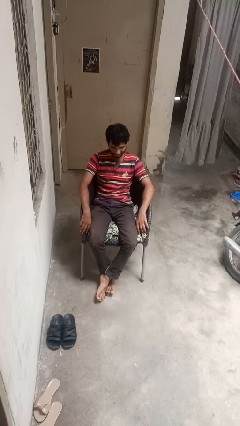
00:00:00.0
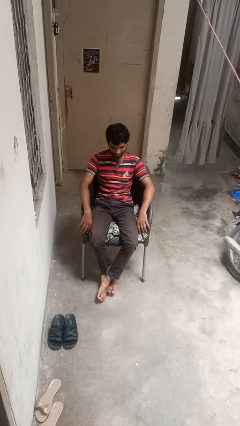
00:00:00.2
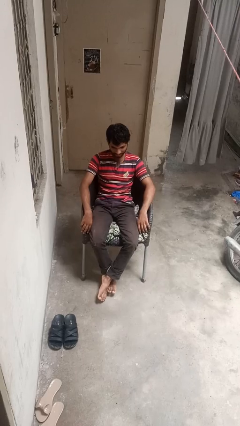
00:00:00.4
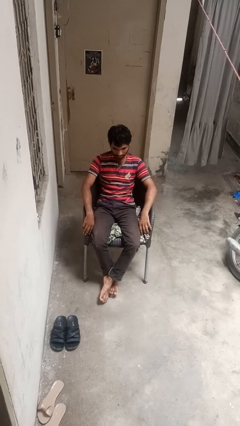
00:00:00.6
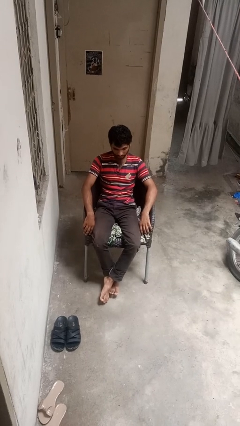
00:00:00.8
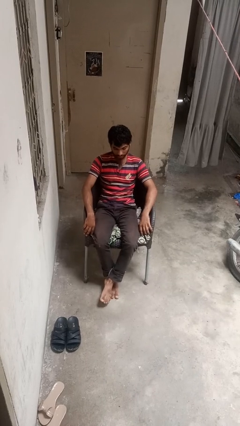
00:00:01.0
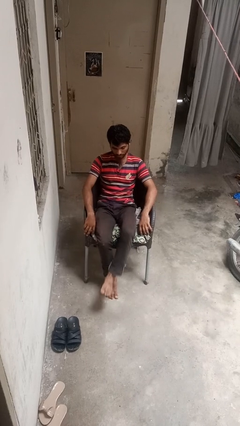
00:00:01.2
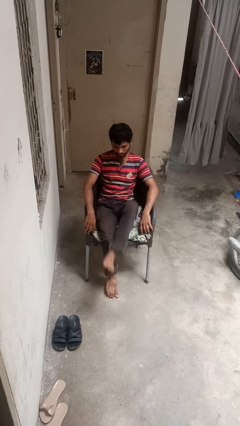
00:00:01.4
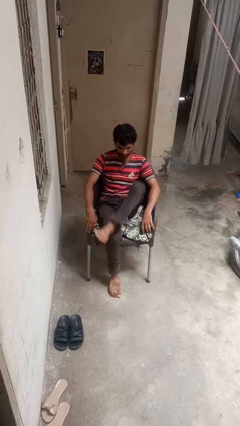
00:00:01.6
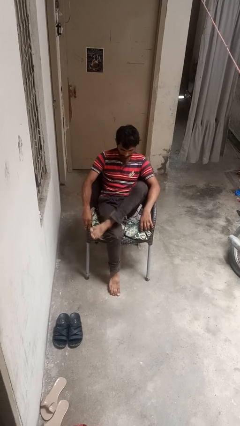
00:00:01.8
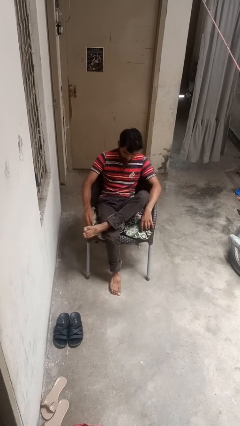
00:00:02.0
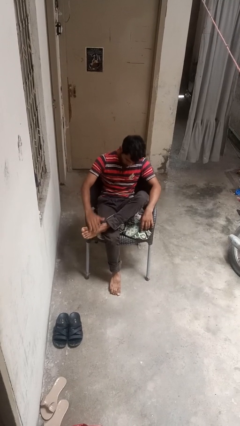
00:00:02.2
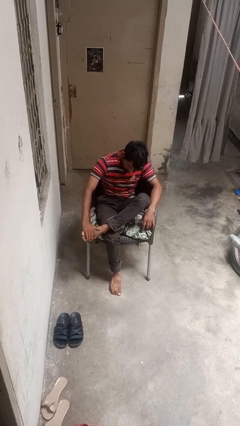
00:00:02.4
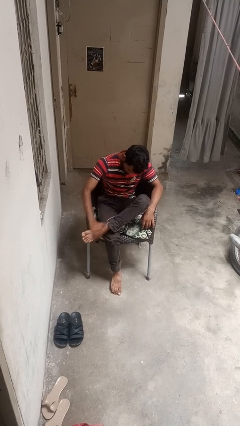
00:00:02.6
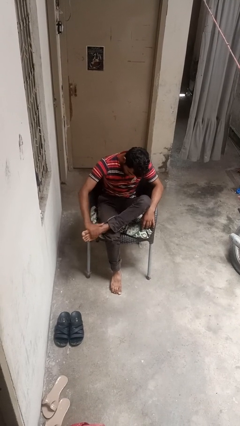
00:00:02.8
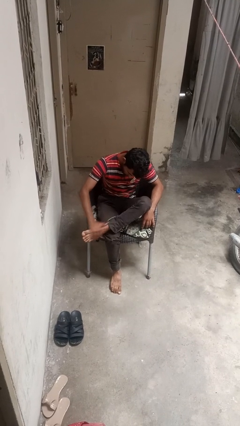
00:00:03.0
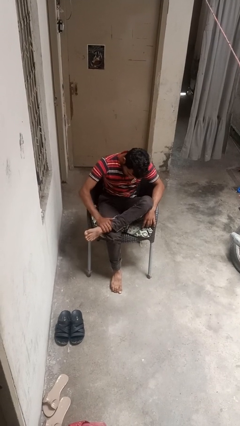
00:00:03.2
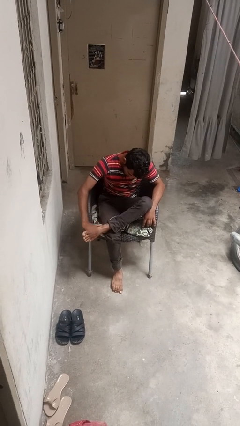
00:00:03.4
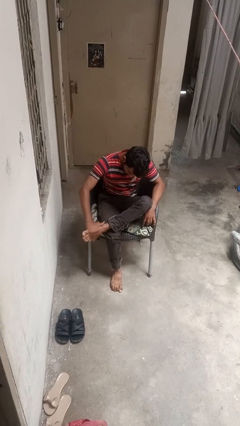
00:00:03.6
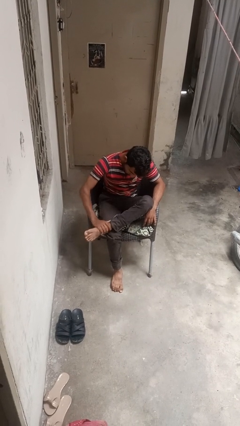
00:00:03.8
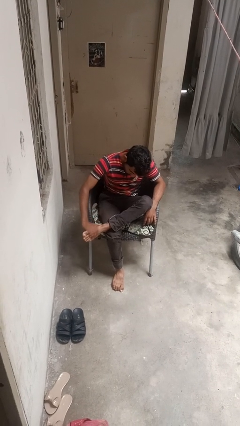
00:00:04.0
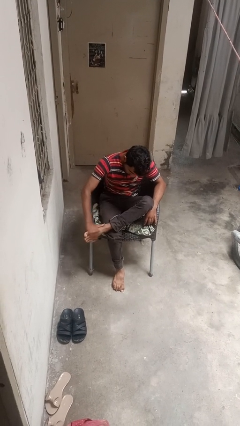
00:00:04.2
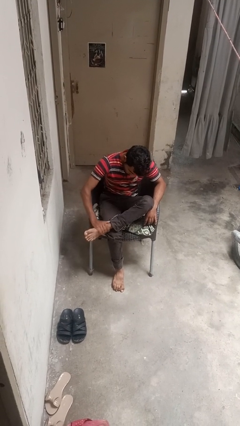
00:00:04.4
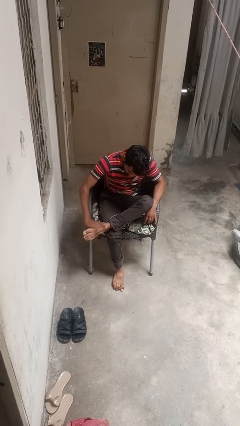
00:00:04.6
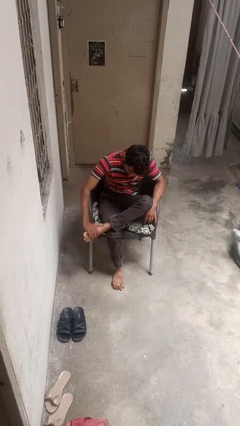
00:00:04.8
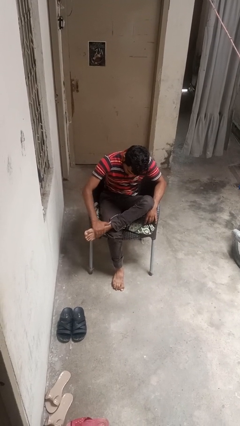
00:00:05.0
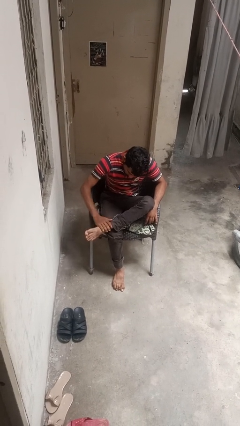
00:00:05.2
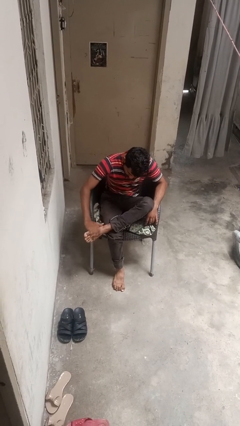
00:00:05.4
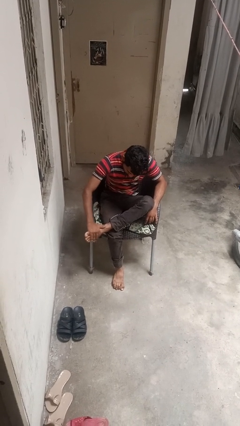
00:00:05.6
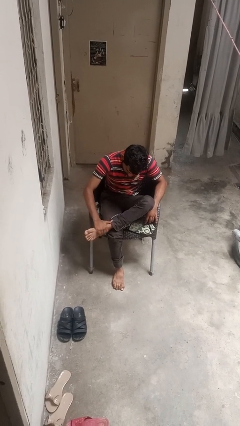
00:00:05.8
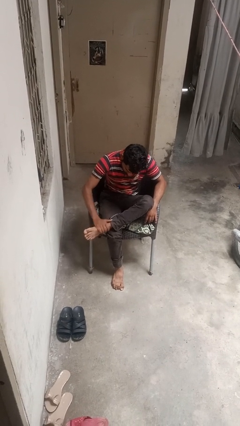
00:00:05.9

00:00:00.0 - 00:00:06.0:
person rubs foot

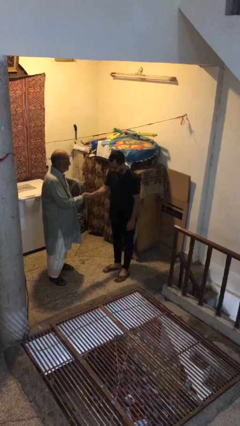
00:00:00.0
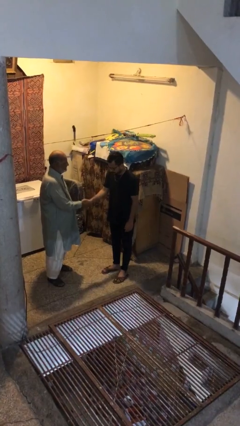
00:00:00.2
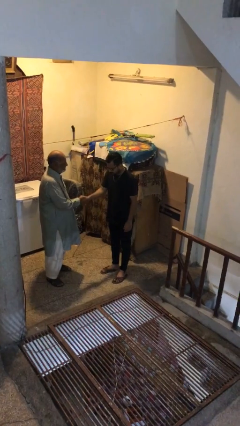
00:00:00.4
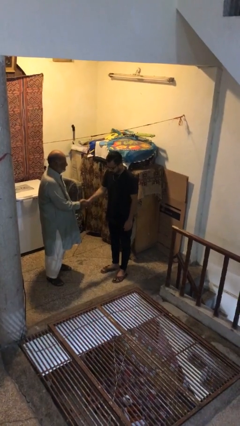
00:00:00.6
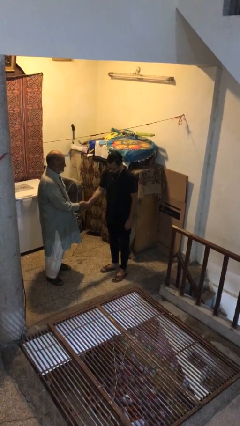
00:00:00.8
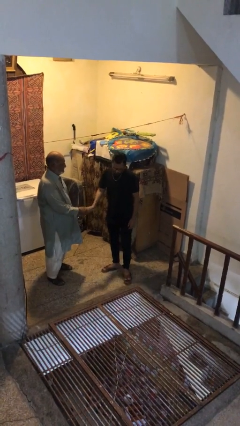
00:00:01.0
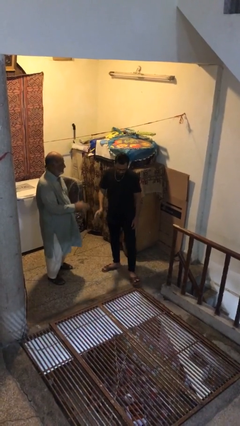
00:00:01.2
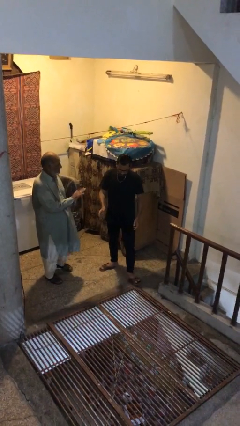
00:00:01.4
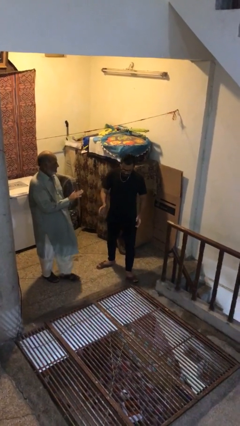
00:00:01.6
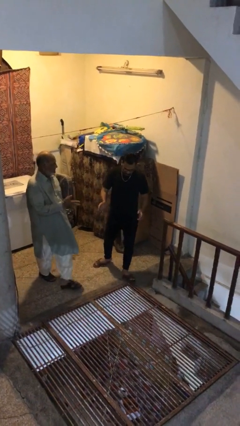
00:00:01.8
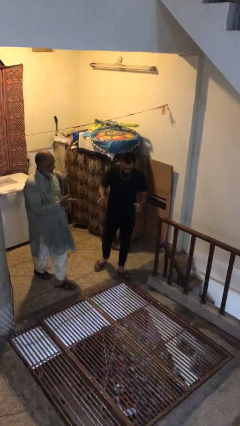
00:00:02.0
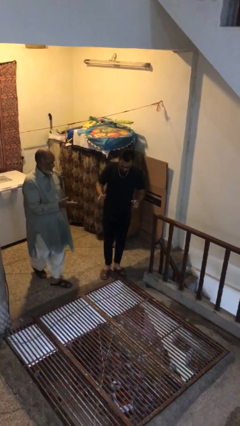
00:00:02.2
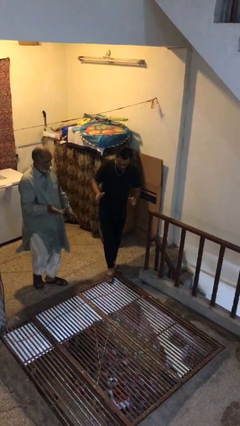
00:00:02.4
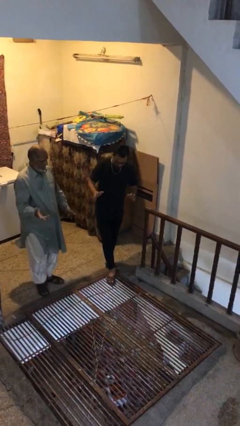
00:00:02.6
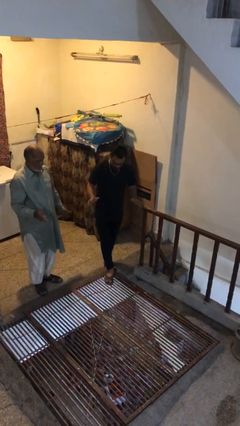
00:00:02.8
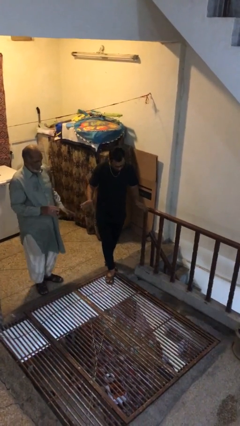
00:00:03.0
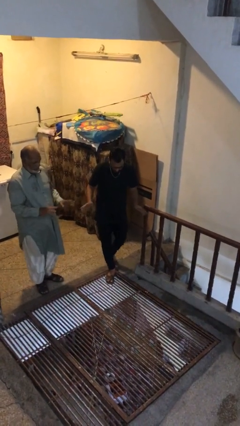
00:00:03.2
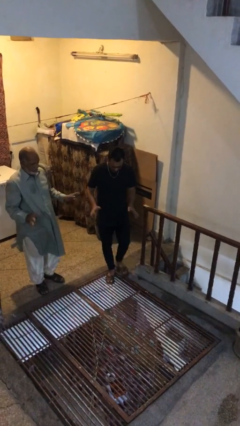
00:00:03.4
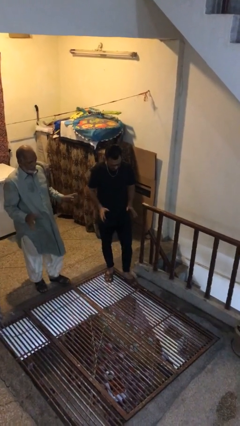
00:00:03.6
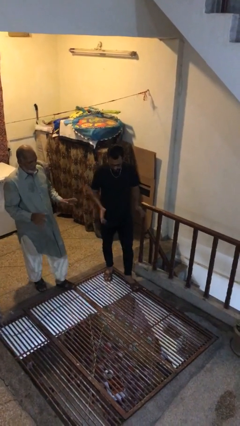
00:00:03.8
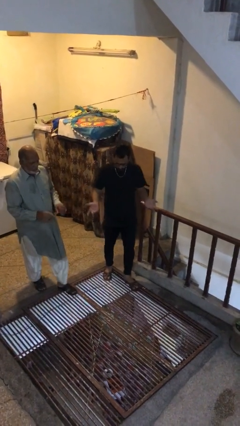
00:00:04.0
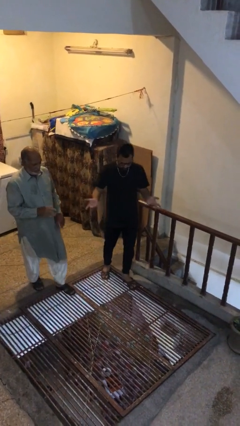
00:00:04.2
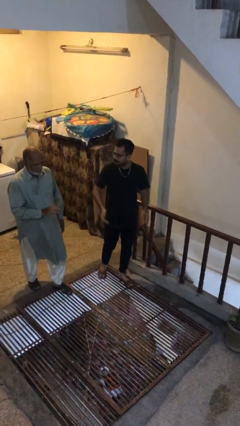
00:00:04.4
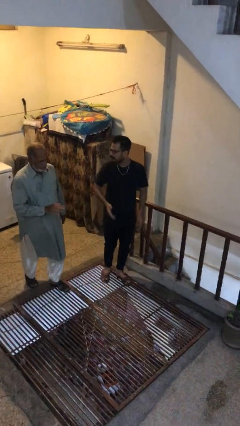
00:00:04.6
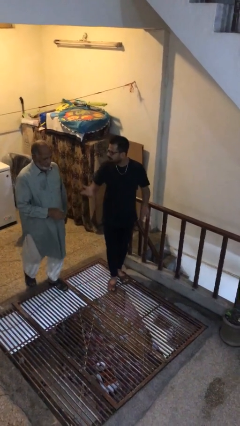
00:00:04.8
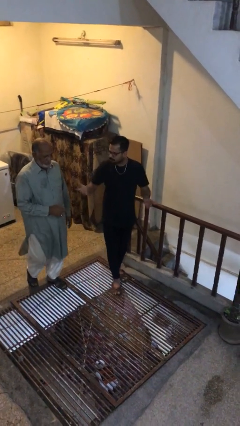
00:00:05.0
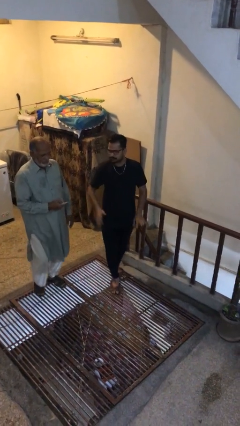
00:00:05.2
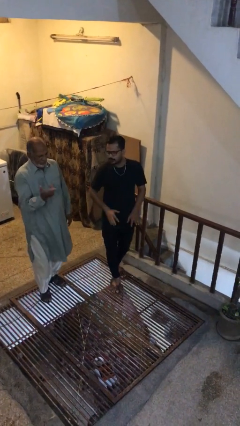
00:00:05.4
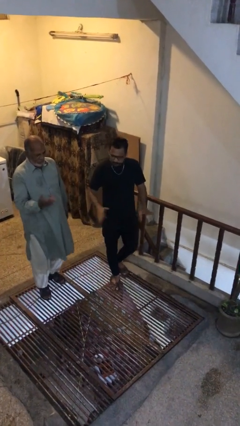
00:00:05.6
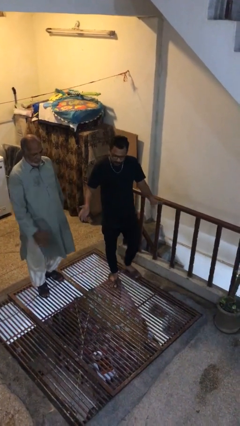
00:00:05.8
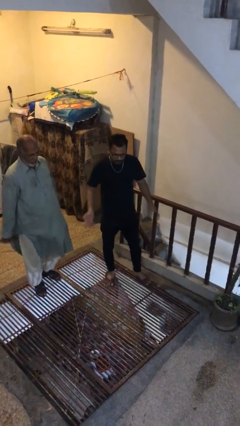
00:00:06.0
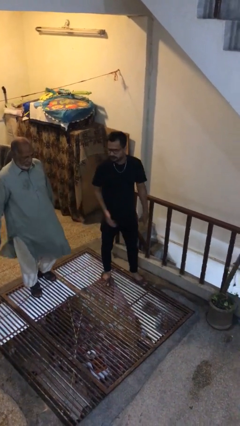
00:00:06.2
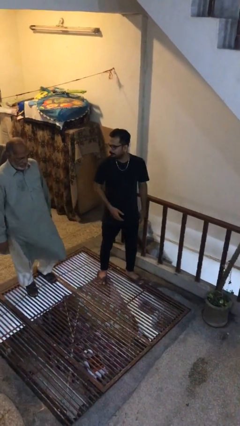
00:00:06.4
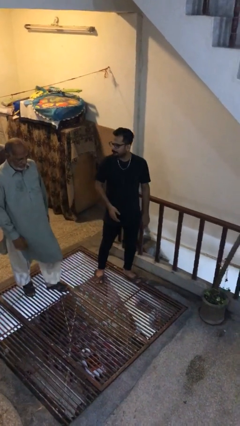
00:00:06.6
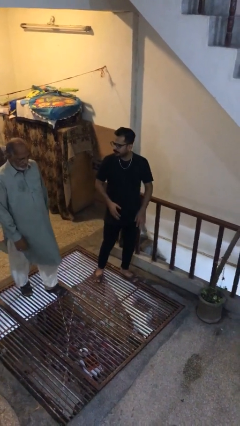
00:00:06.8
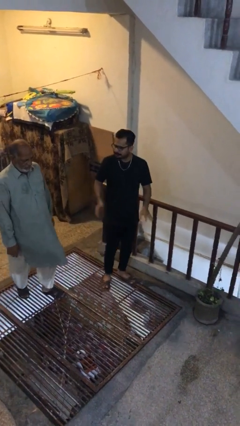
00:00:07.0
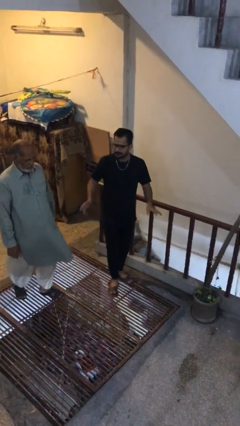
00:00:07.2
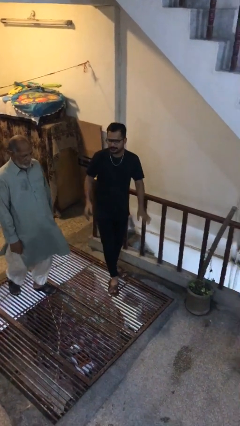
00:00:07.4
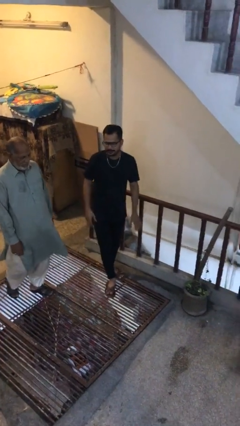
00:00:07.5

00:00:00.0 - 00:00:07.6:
person talks to person

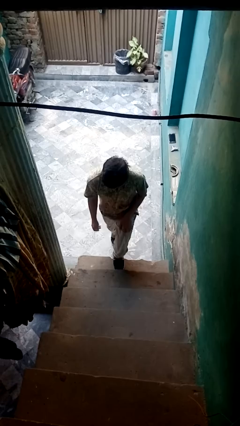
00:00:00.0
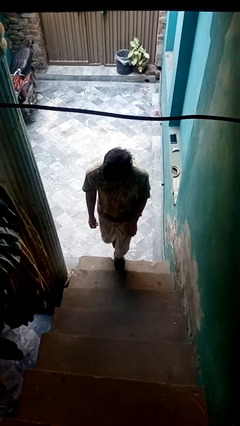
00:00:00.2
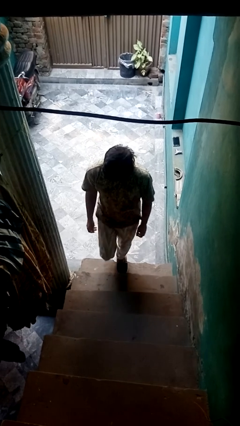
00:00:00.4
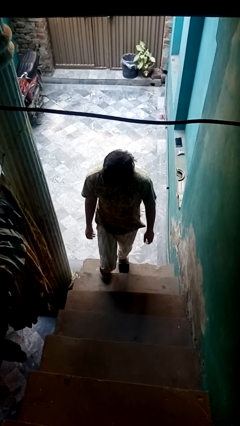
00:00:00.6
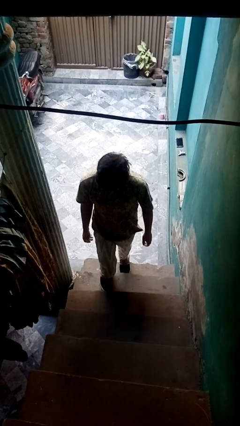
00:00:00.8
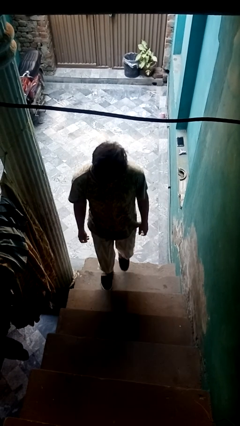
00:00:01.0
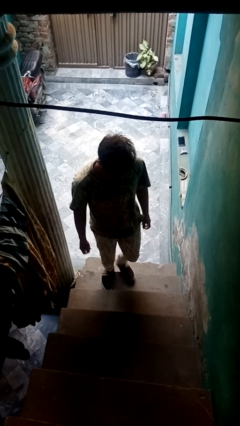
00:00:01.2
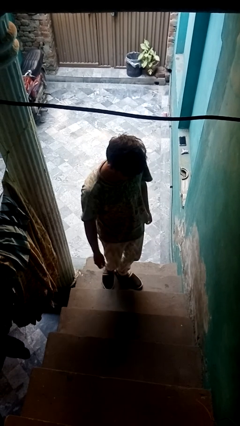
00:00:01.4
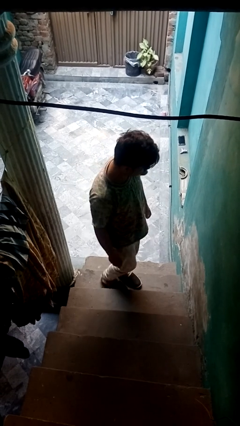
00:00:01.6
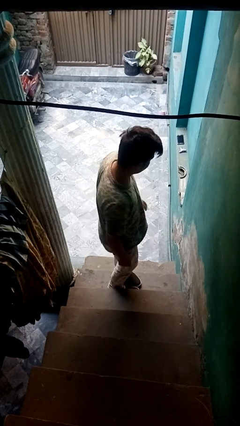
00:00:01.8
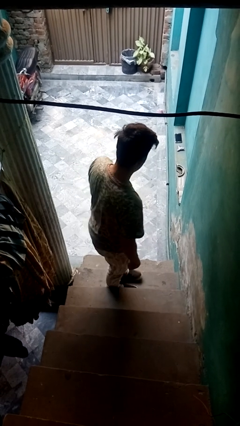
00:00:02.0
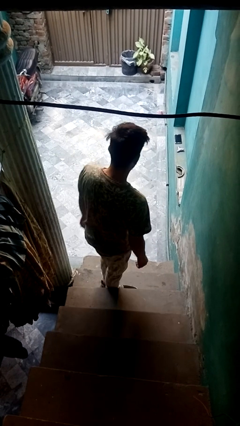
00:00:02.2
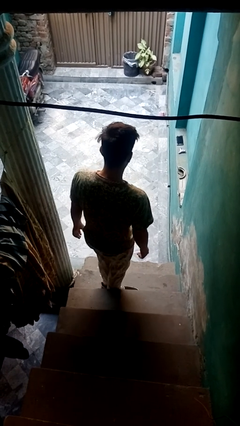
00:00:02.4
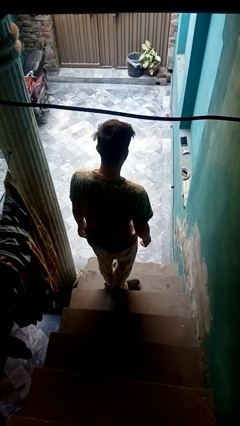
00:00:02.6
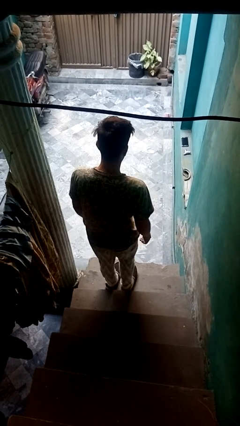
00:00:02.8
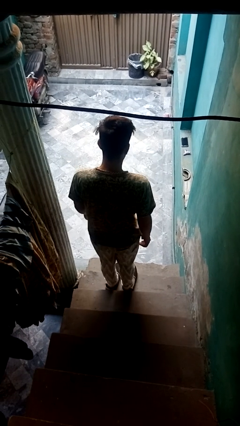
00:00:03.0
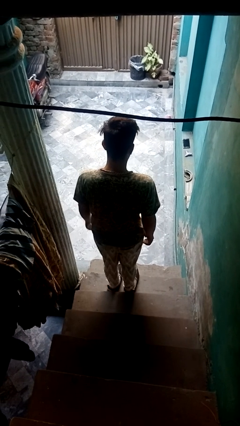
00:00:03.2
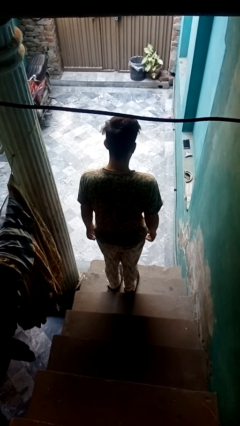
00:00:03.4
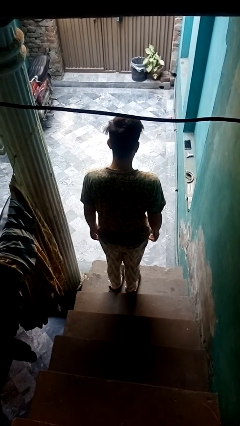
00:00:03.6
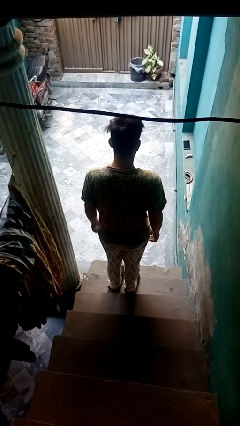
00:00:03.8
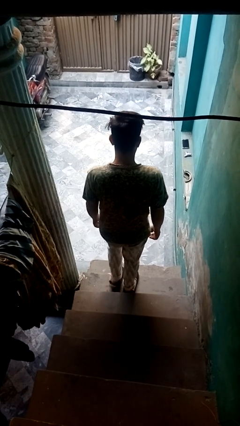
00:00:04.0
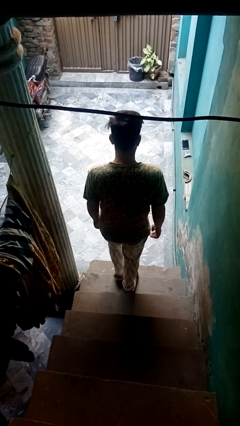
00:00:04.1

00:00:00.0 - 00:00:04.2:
person climbs up stairs

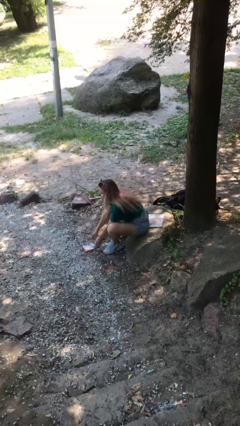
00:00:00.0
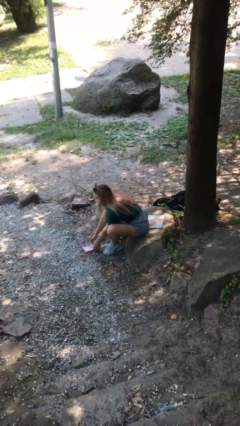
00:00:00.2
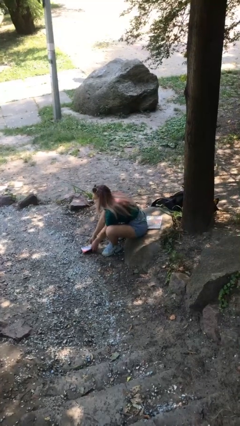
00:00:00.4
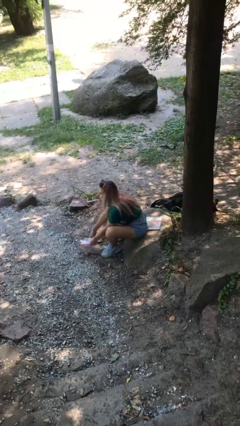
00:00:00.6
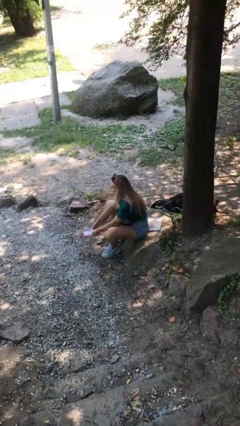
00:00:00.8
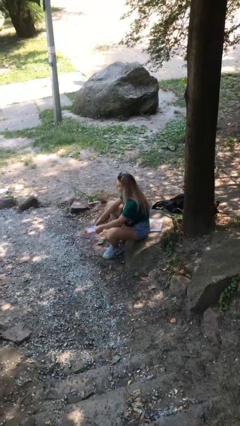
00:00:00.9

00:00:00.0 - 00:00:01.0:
person picks up object from floor
